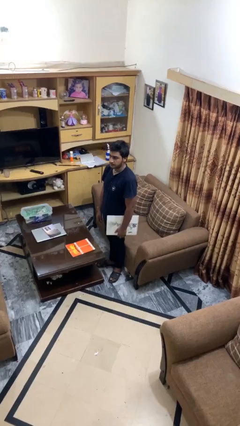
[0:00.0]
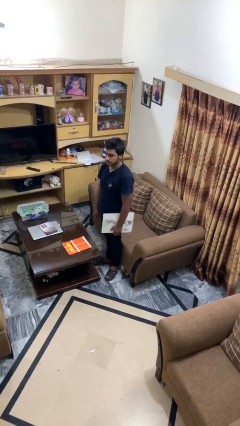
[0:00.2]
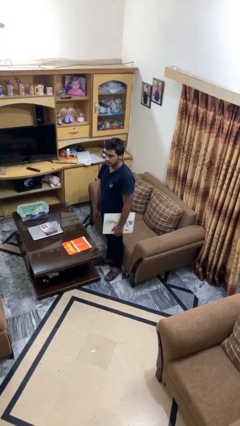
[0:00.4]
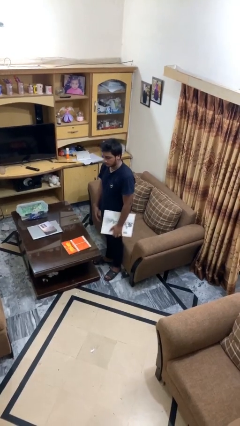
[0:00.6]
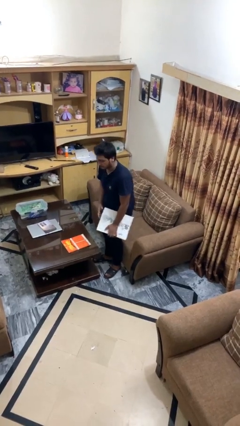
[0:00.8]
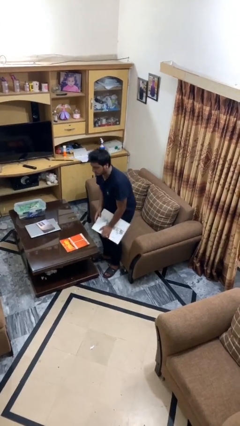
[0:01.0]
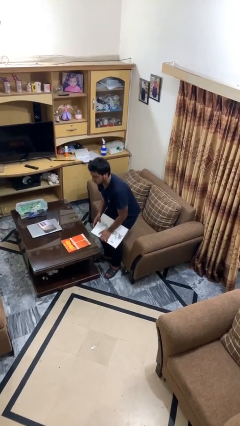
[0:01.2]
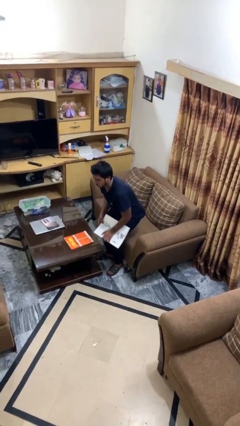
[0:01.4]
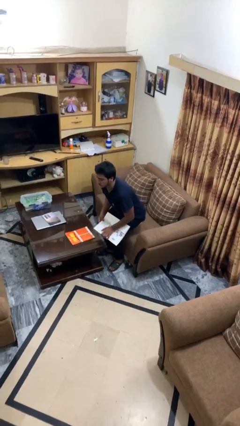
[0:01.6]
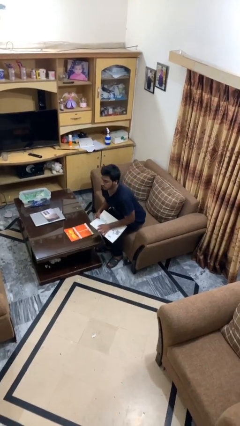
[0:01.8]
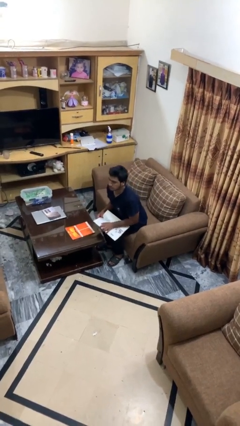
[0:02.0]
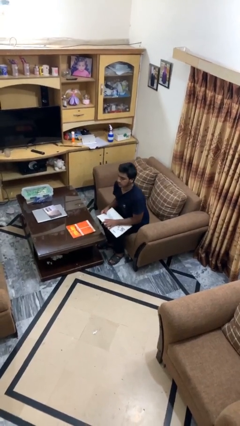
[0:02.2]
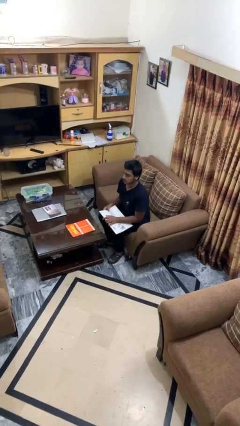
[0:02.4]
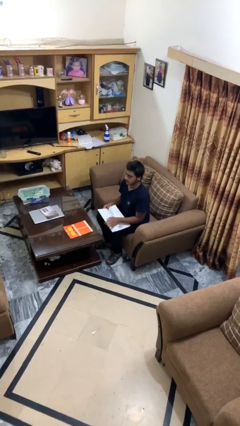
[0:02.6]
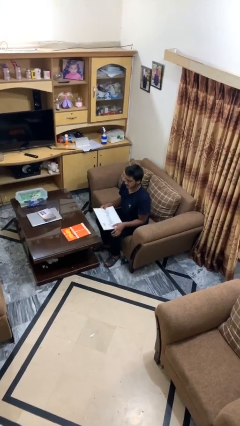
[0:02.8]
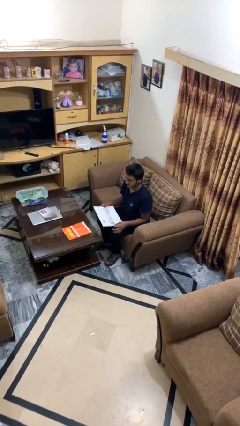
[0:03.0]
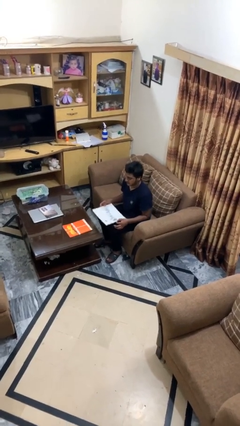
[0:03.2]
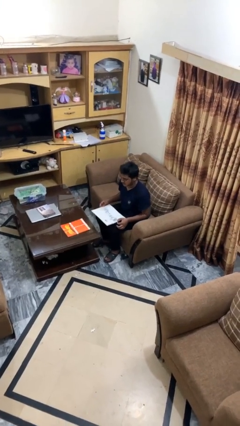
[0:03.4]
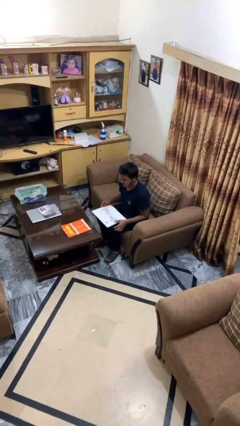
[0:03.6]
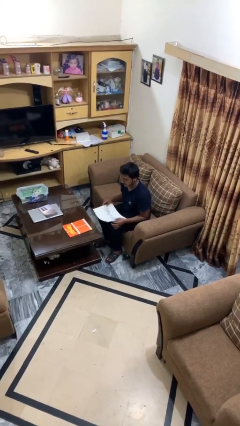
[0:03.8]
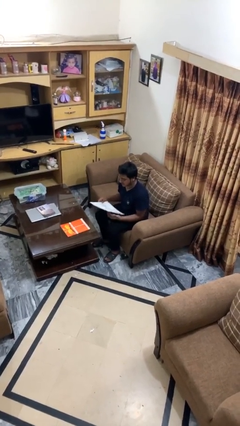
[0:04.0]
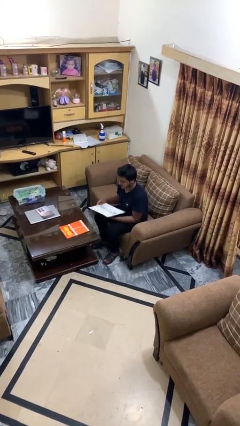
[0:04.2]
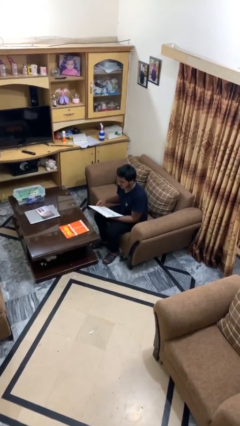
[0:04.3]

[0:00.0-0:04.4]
person sits down

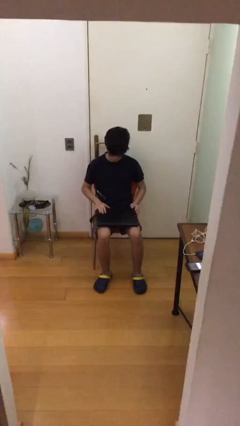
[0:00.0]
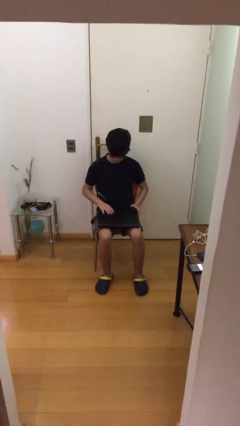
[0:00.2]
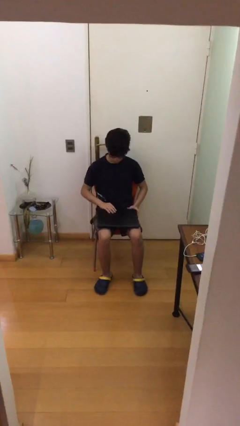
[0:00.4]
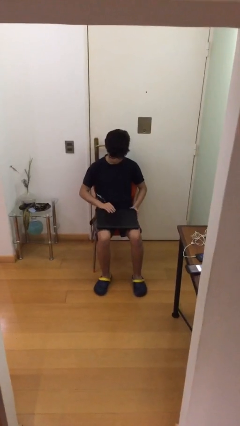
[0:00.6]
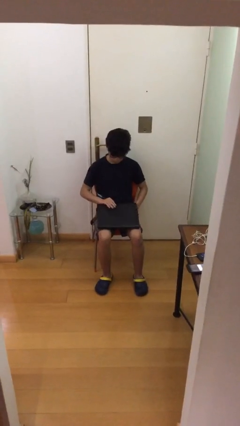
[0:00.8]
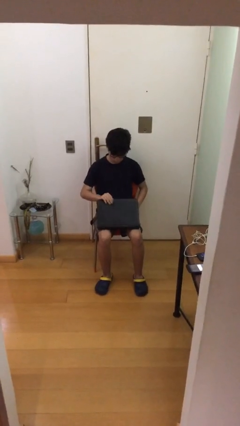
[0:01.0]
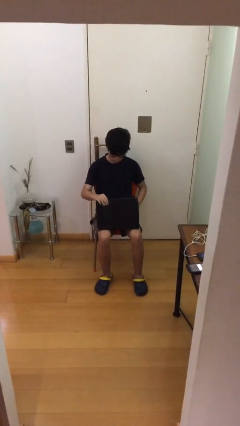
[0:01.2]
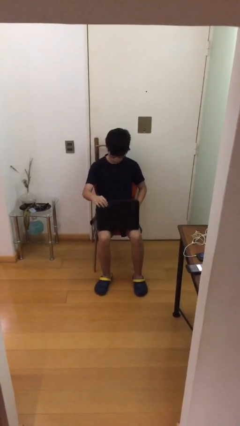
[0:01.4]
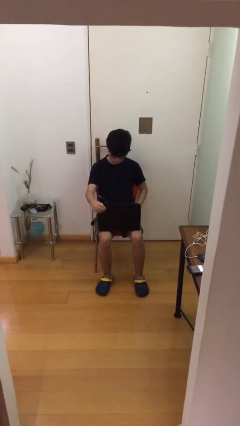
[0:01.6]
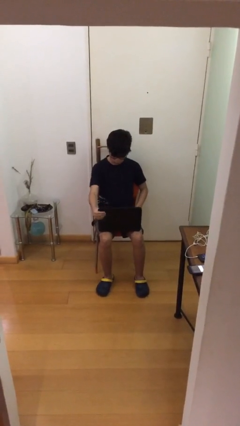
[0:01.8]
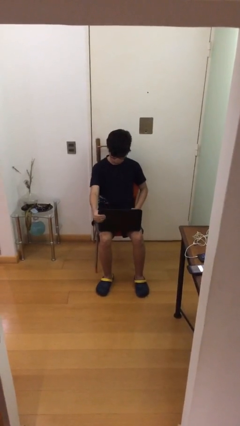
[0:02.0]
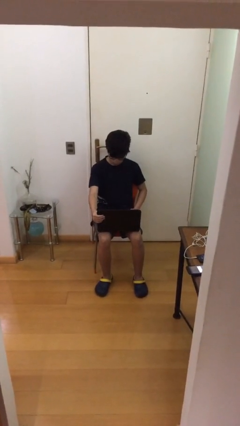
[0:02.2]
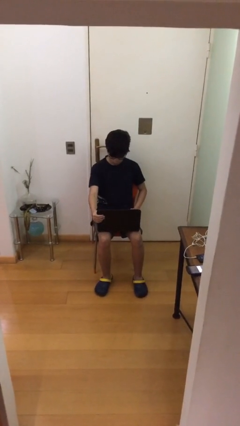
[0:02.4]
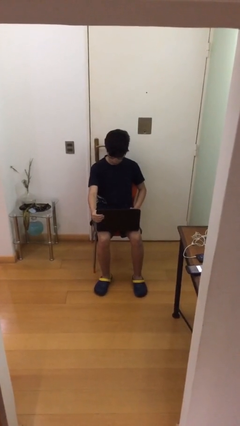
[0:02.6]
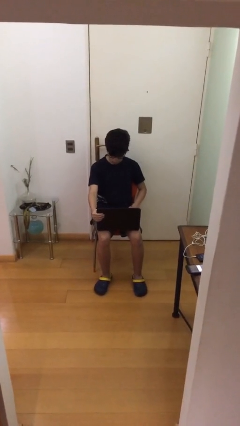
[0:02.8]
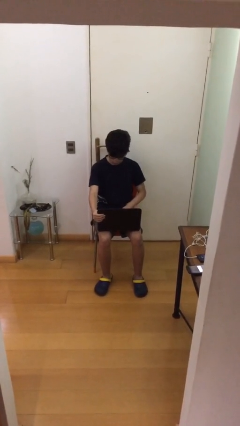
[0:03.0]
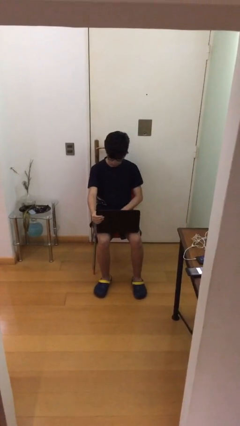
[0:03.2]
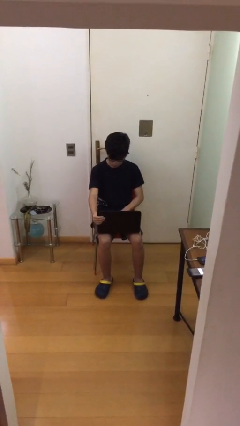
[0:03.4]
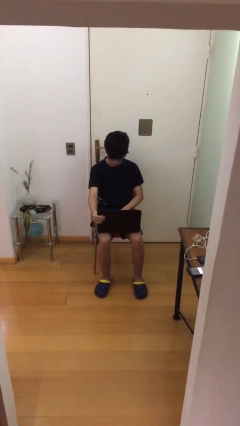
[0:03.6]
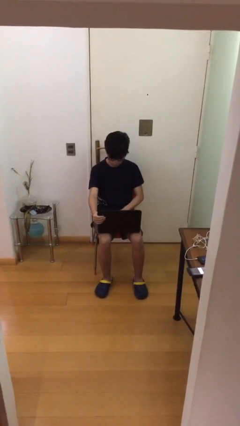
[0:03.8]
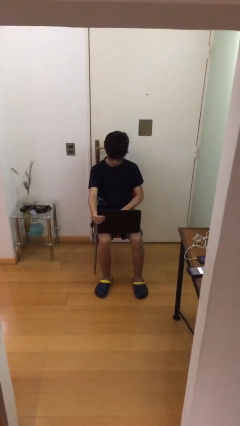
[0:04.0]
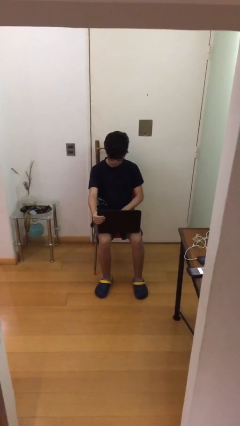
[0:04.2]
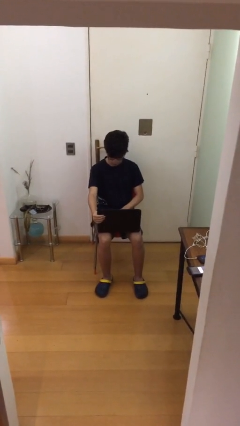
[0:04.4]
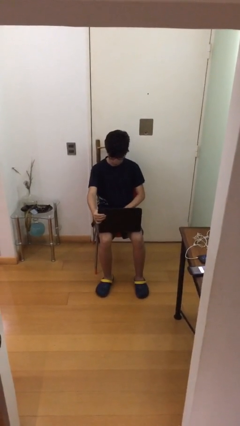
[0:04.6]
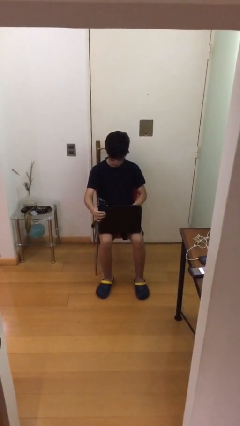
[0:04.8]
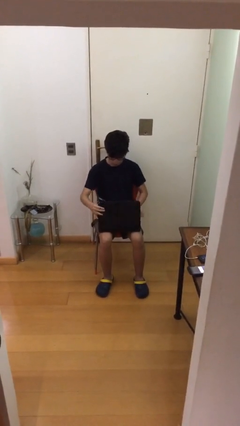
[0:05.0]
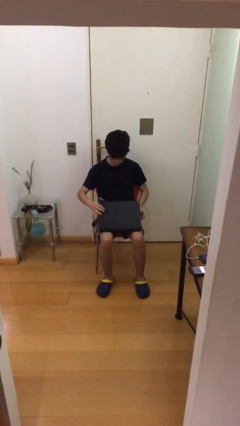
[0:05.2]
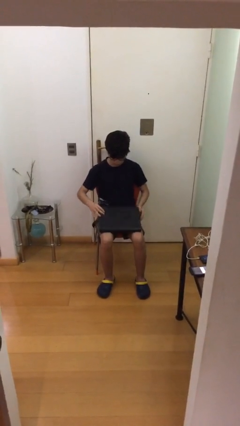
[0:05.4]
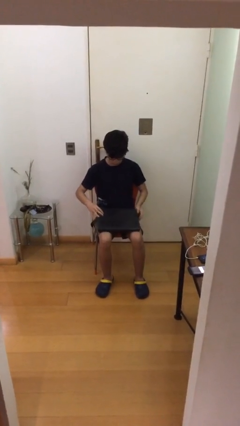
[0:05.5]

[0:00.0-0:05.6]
person interacts with laptop

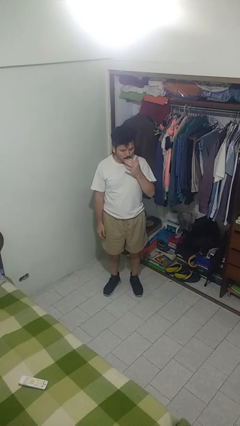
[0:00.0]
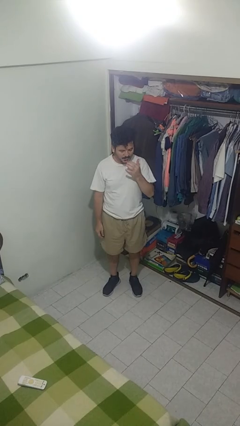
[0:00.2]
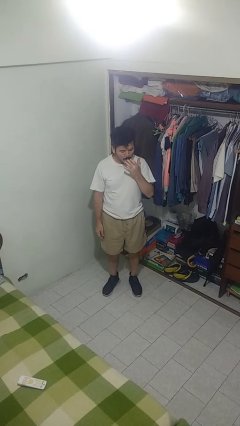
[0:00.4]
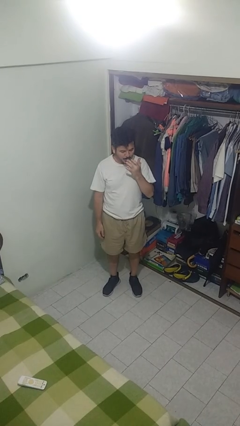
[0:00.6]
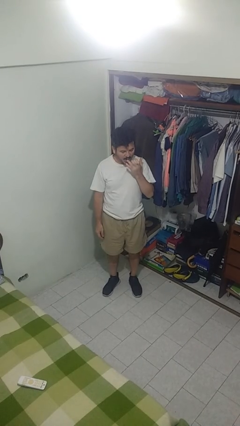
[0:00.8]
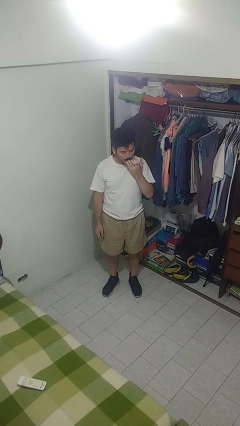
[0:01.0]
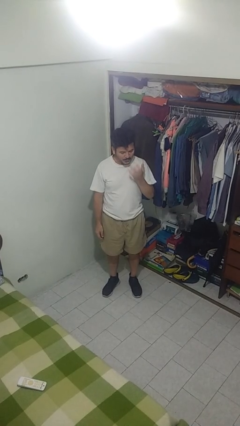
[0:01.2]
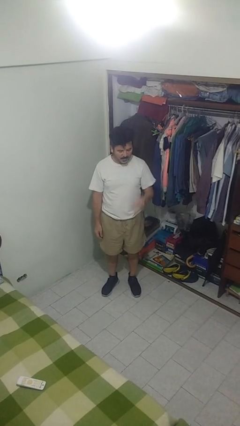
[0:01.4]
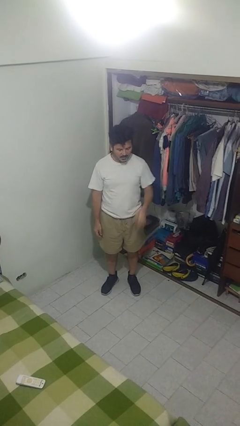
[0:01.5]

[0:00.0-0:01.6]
person licks fingers

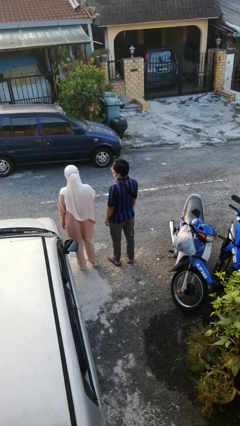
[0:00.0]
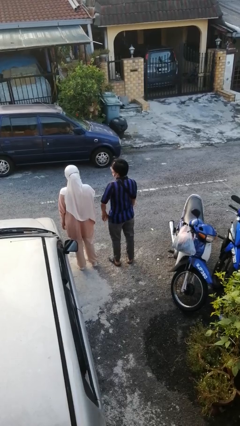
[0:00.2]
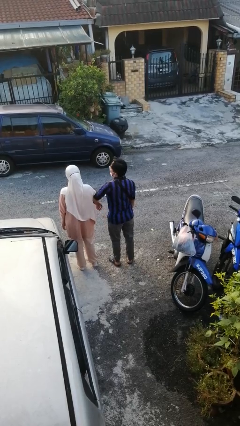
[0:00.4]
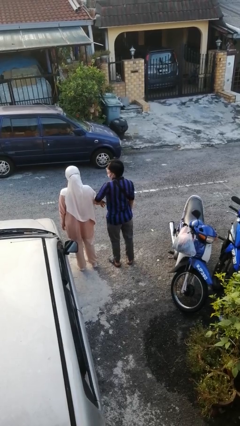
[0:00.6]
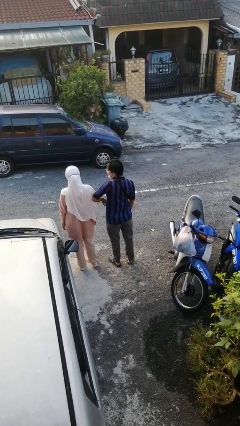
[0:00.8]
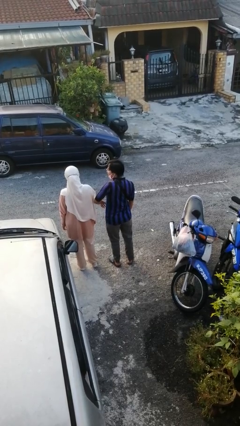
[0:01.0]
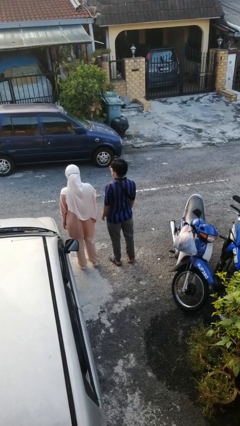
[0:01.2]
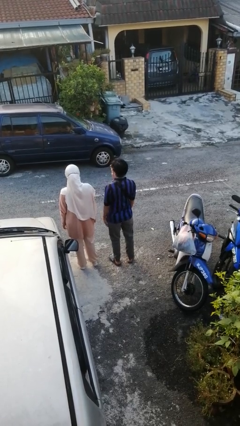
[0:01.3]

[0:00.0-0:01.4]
person nudges person with elbow

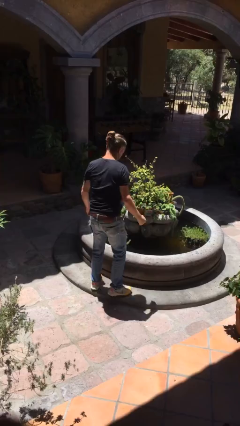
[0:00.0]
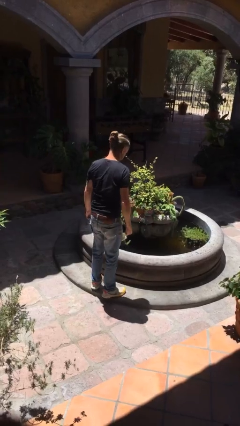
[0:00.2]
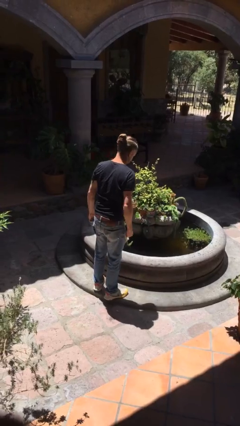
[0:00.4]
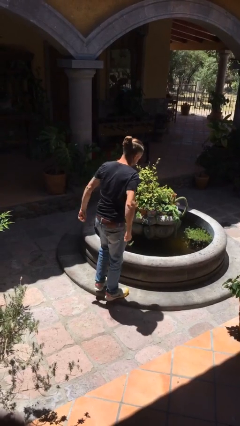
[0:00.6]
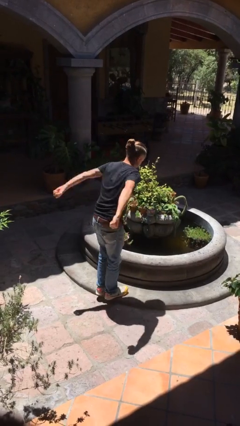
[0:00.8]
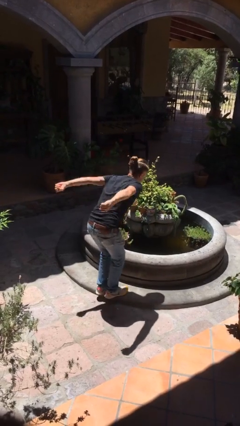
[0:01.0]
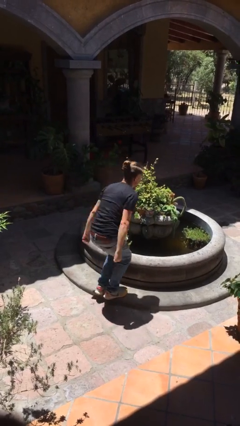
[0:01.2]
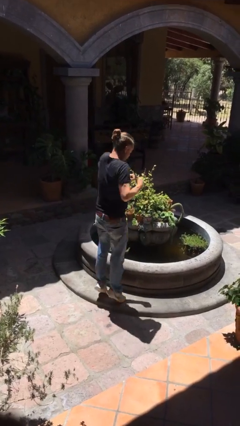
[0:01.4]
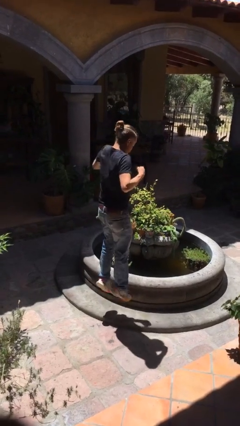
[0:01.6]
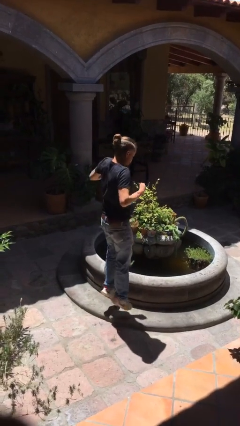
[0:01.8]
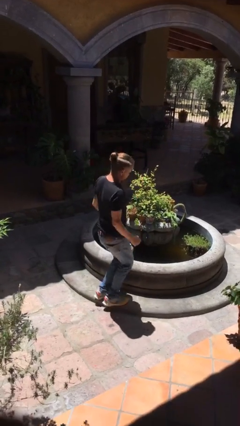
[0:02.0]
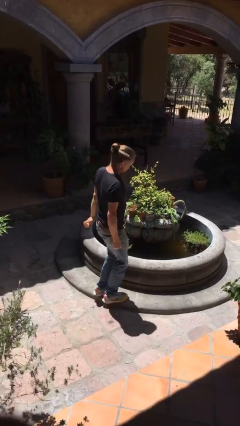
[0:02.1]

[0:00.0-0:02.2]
person jumps

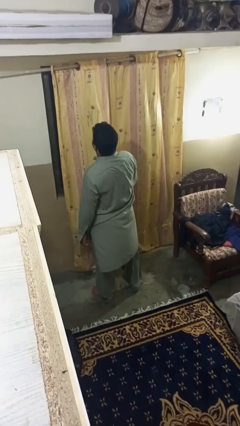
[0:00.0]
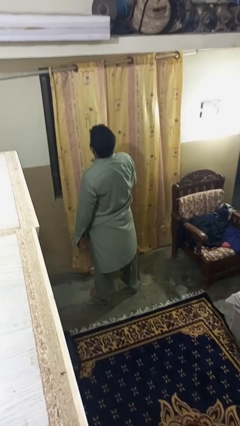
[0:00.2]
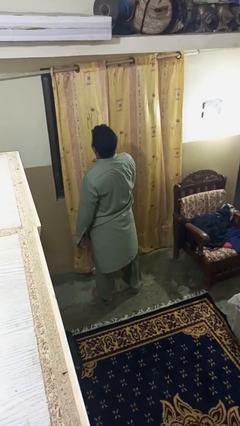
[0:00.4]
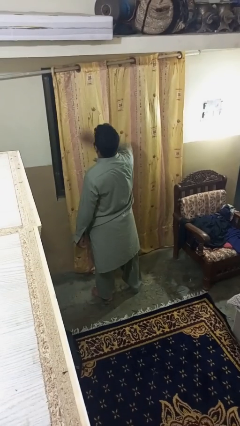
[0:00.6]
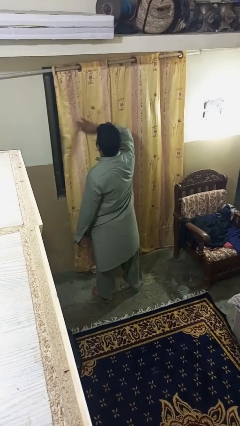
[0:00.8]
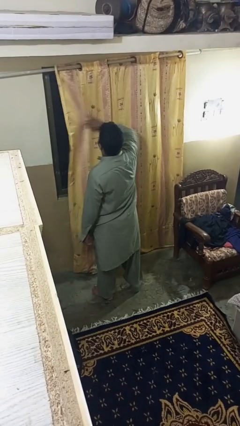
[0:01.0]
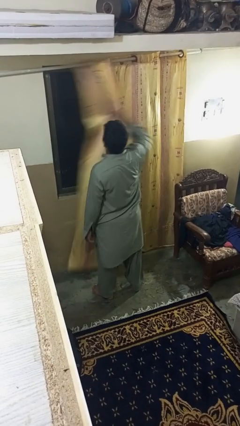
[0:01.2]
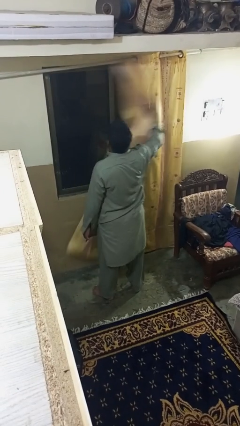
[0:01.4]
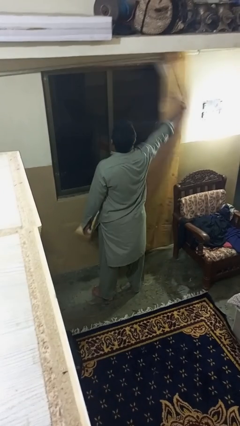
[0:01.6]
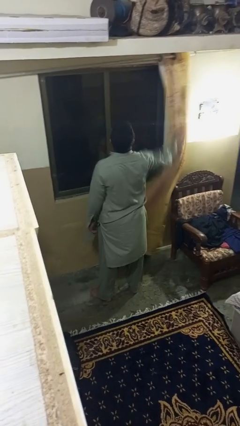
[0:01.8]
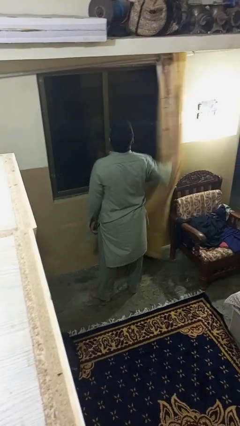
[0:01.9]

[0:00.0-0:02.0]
person opens curtains

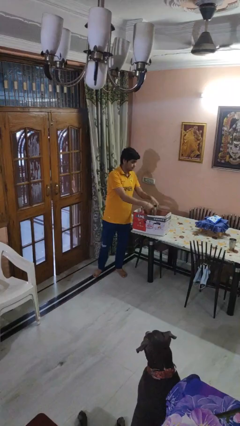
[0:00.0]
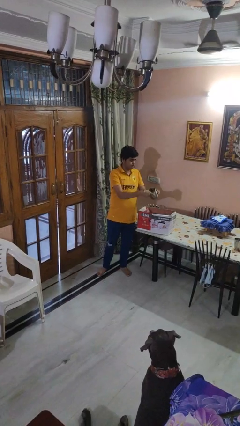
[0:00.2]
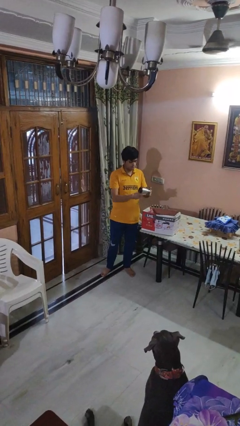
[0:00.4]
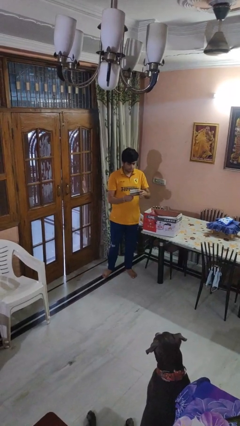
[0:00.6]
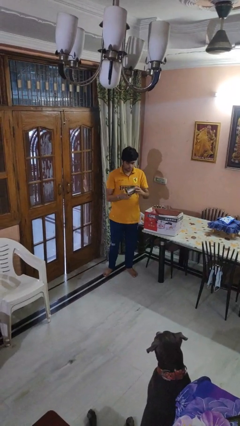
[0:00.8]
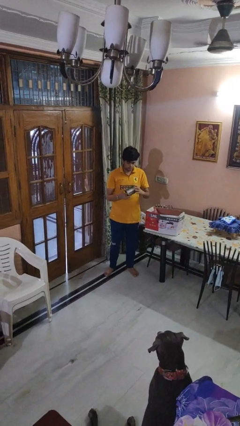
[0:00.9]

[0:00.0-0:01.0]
person takes object from box
